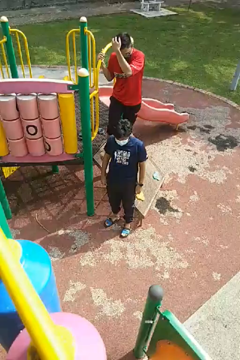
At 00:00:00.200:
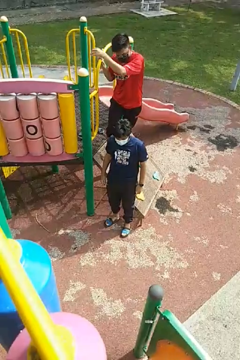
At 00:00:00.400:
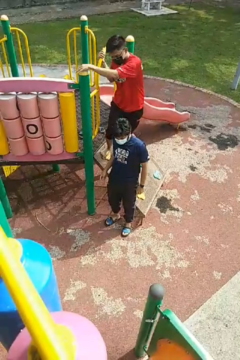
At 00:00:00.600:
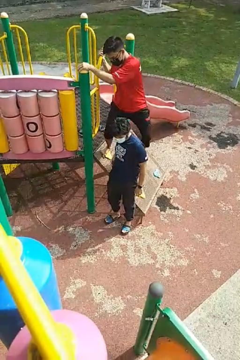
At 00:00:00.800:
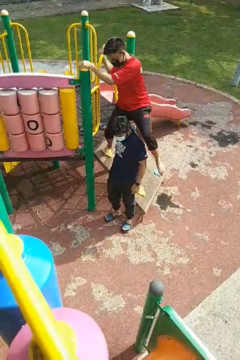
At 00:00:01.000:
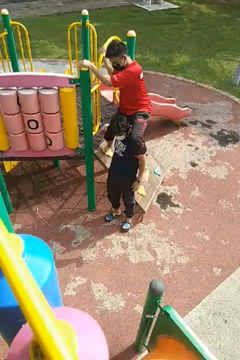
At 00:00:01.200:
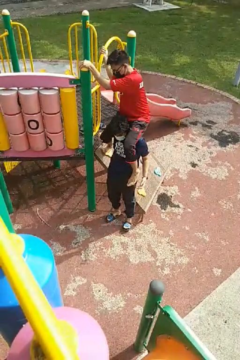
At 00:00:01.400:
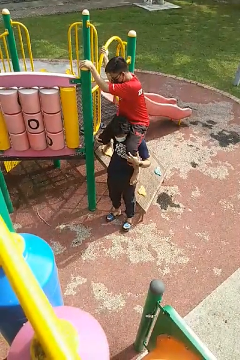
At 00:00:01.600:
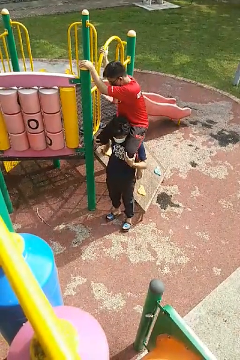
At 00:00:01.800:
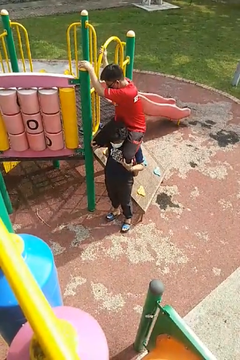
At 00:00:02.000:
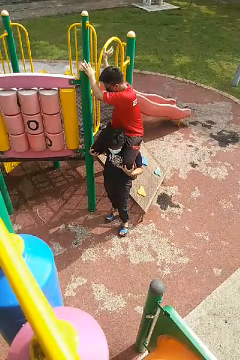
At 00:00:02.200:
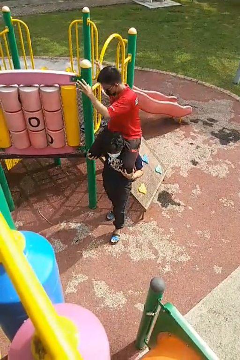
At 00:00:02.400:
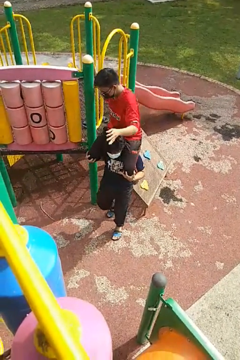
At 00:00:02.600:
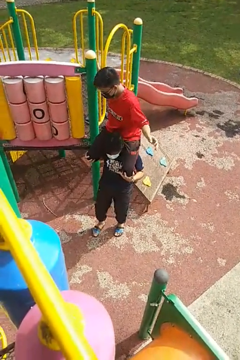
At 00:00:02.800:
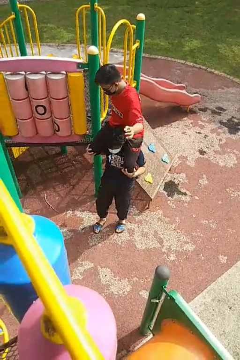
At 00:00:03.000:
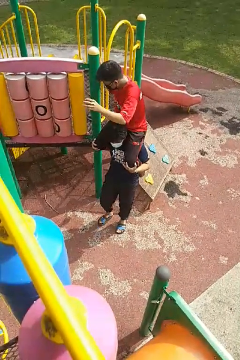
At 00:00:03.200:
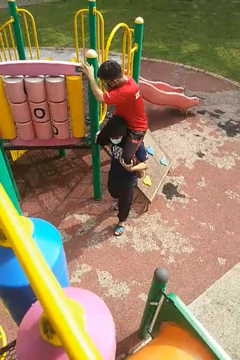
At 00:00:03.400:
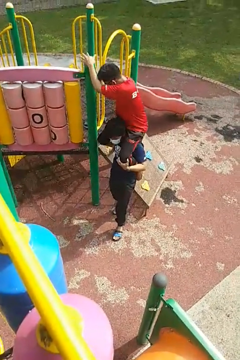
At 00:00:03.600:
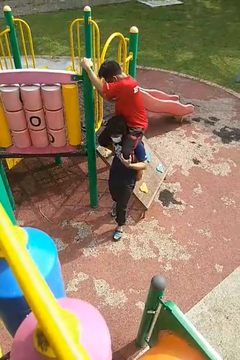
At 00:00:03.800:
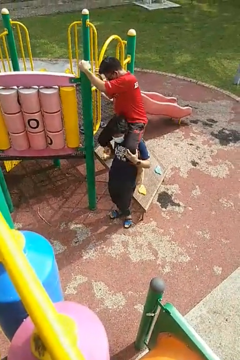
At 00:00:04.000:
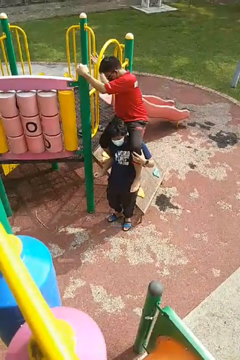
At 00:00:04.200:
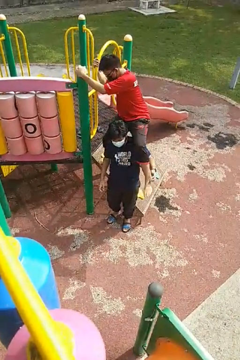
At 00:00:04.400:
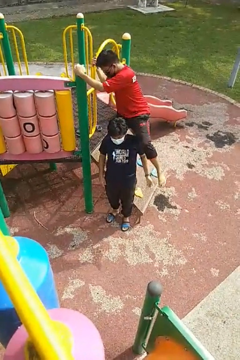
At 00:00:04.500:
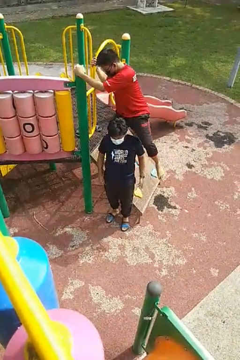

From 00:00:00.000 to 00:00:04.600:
person carries person on shoulders

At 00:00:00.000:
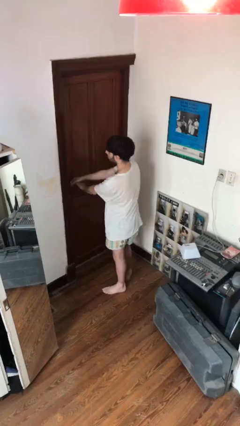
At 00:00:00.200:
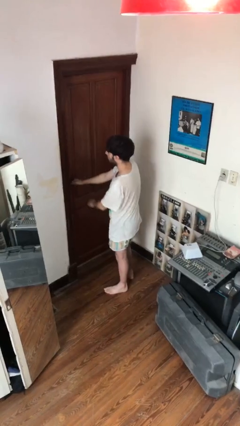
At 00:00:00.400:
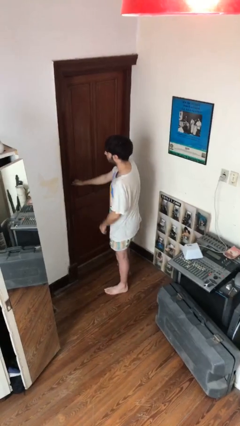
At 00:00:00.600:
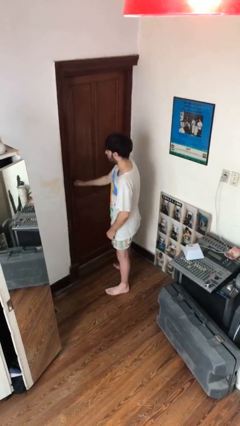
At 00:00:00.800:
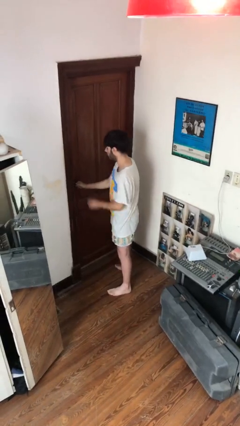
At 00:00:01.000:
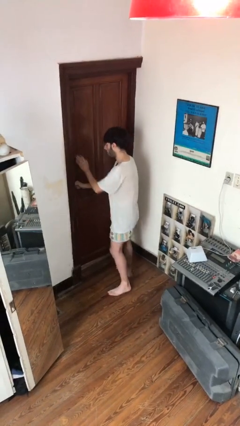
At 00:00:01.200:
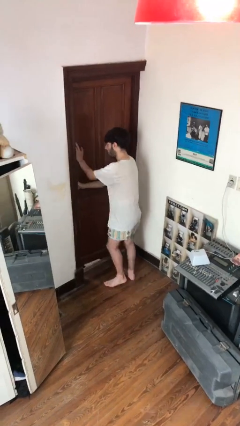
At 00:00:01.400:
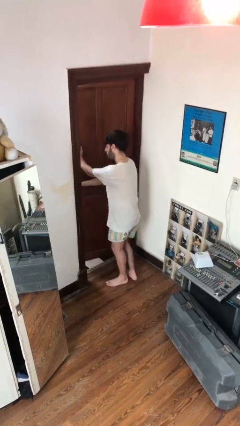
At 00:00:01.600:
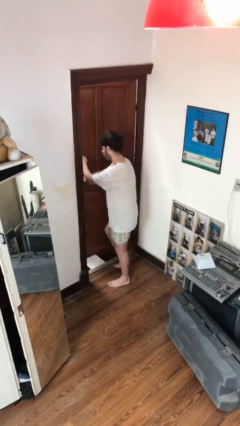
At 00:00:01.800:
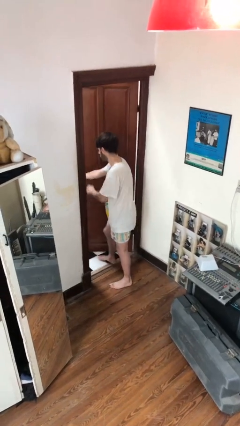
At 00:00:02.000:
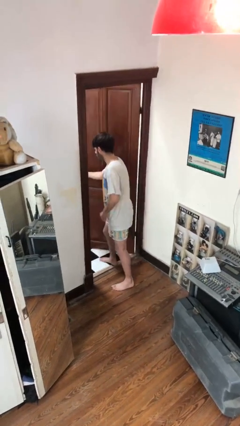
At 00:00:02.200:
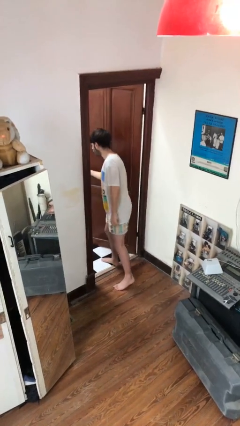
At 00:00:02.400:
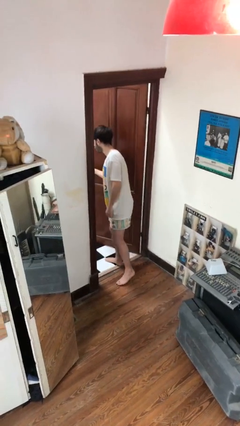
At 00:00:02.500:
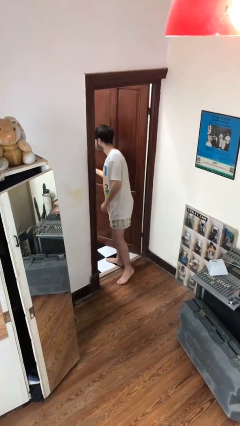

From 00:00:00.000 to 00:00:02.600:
person opens facility door

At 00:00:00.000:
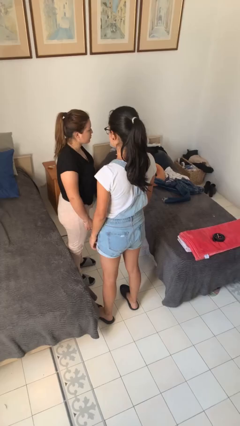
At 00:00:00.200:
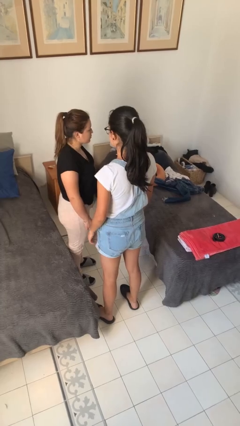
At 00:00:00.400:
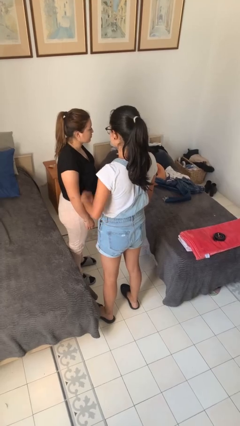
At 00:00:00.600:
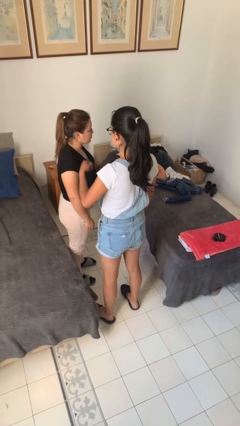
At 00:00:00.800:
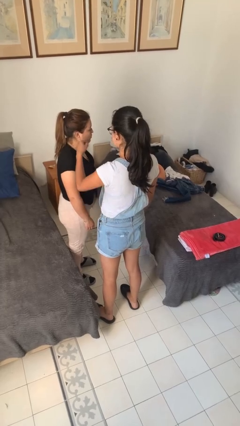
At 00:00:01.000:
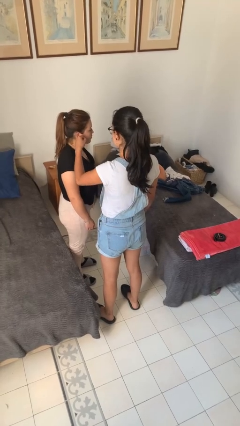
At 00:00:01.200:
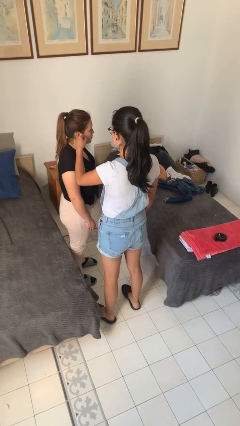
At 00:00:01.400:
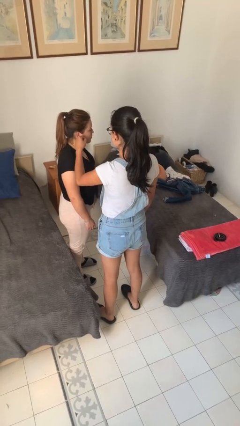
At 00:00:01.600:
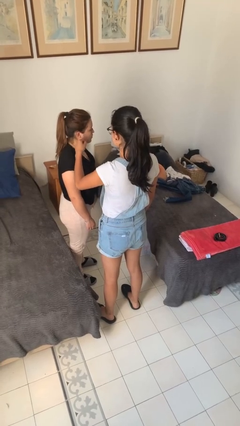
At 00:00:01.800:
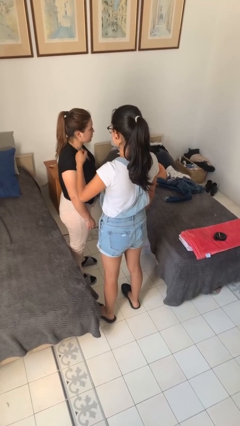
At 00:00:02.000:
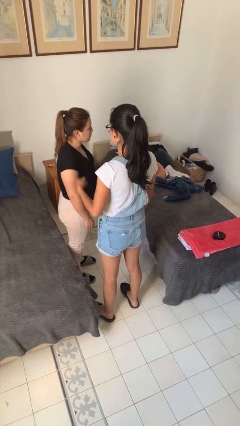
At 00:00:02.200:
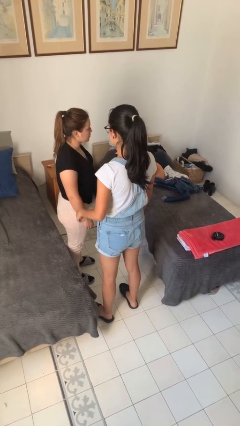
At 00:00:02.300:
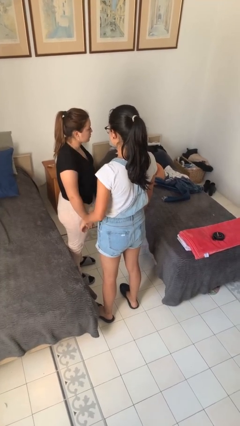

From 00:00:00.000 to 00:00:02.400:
person touches face of person

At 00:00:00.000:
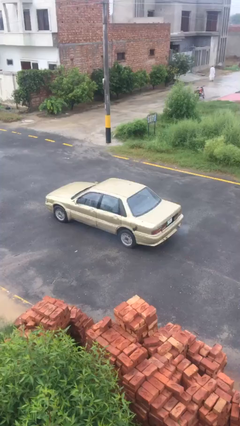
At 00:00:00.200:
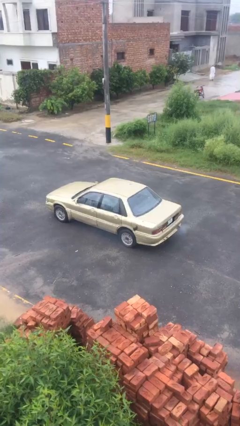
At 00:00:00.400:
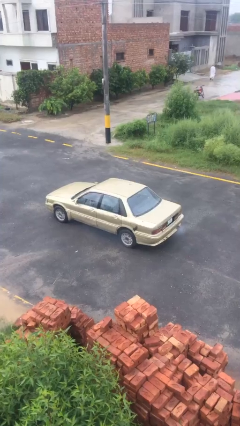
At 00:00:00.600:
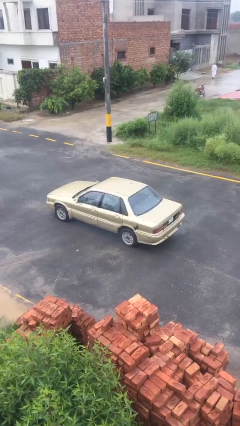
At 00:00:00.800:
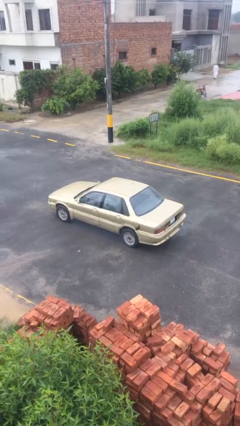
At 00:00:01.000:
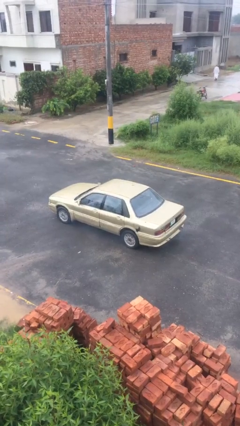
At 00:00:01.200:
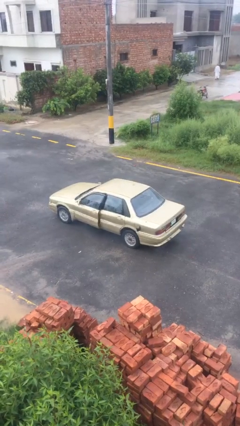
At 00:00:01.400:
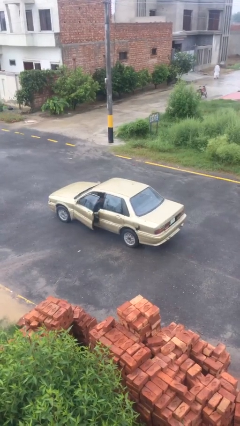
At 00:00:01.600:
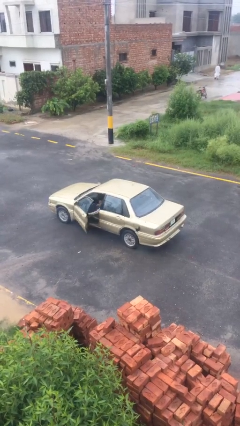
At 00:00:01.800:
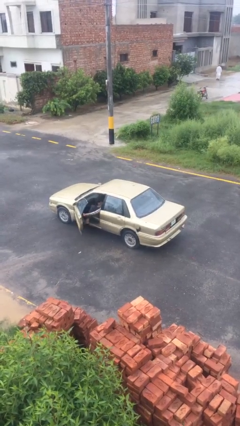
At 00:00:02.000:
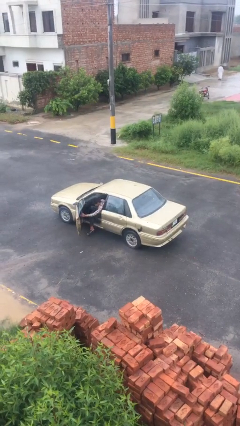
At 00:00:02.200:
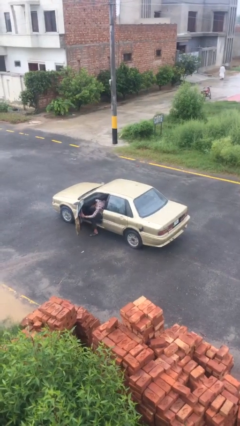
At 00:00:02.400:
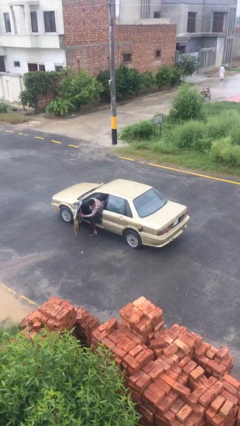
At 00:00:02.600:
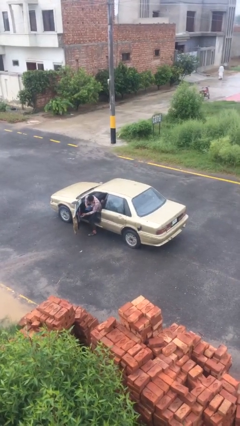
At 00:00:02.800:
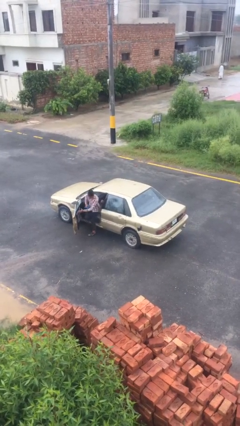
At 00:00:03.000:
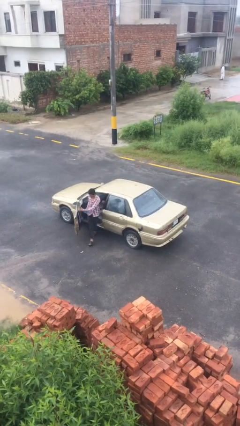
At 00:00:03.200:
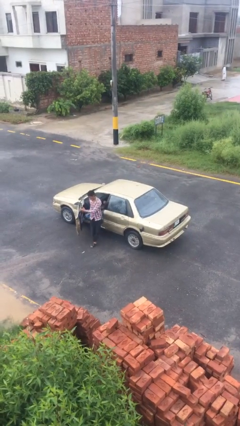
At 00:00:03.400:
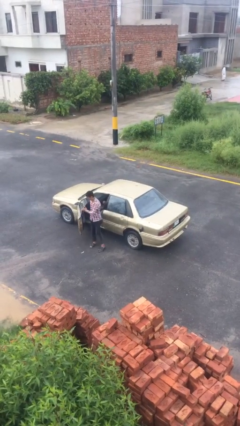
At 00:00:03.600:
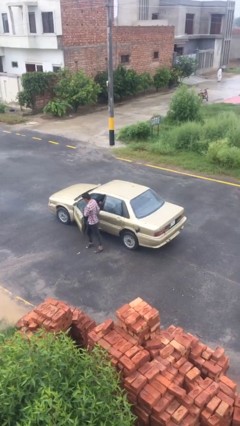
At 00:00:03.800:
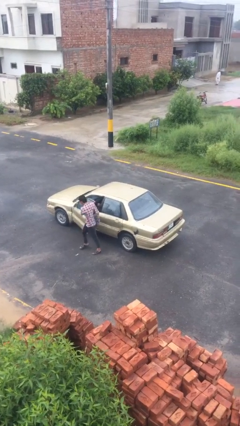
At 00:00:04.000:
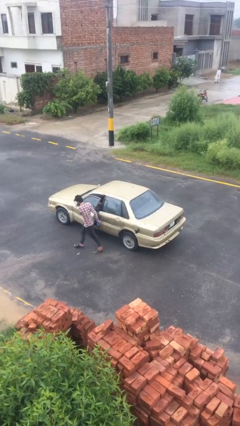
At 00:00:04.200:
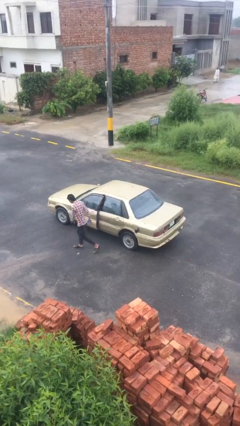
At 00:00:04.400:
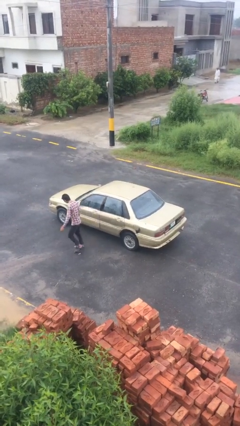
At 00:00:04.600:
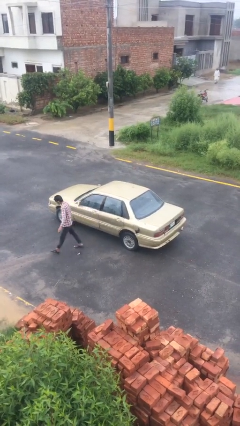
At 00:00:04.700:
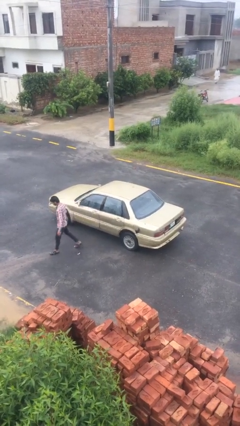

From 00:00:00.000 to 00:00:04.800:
car drops off person

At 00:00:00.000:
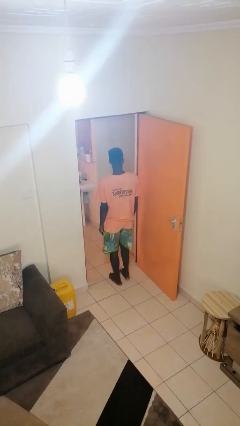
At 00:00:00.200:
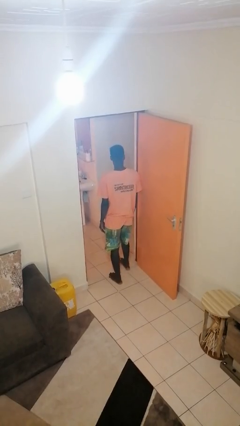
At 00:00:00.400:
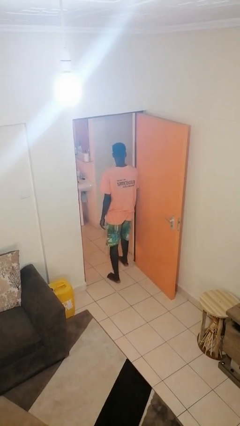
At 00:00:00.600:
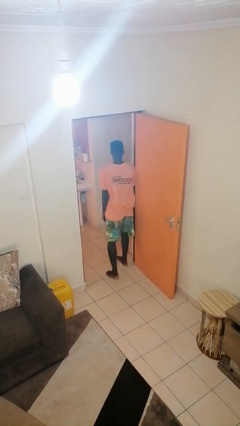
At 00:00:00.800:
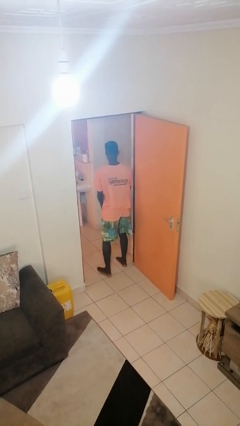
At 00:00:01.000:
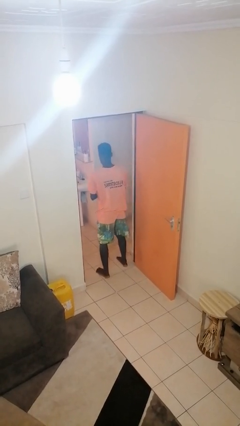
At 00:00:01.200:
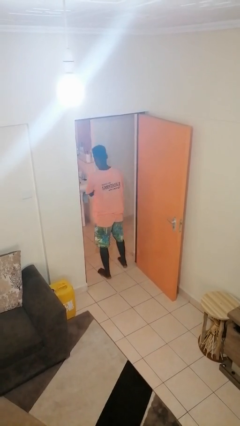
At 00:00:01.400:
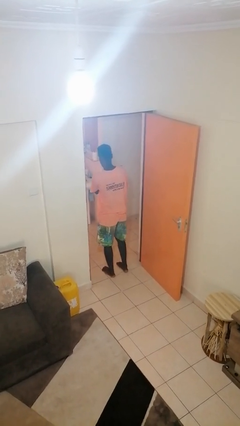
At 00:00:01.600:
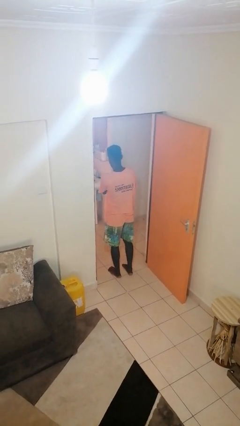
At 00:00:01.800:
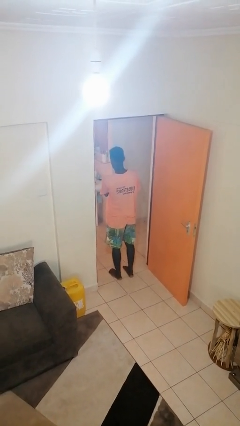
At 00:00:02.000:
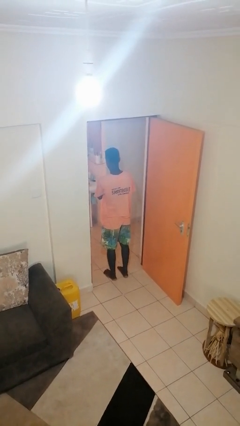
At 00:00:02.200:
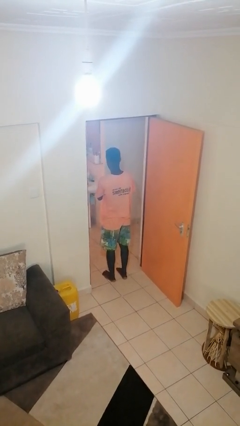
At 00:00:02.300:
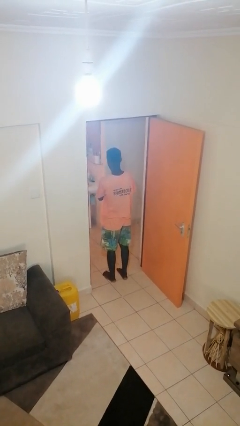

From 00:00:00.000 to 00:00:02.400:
person bumps into wall

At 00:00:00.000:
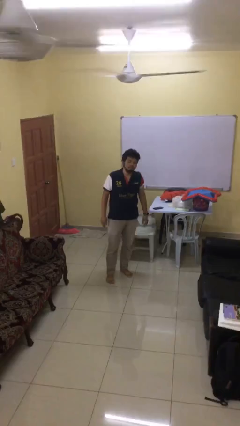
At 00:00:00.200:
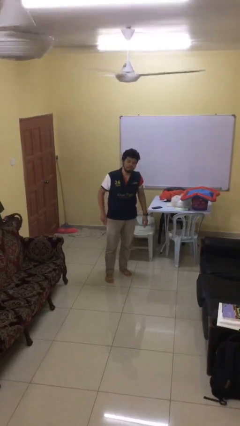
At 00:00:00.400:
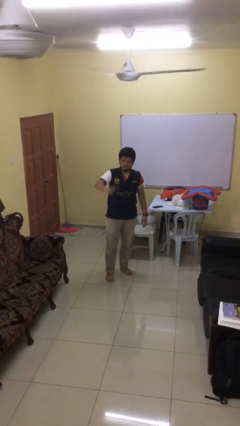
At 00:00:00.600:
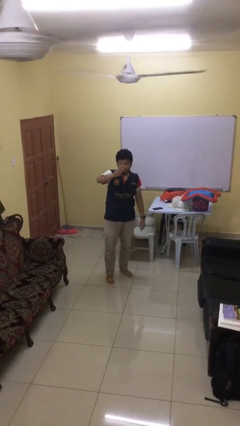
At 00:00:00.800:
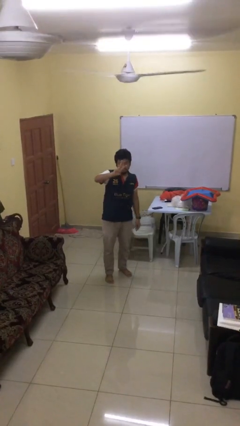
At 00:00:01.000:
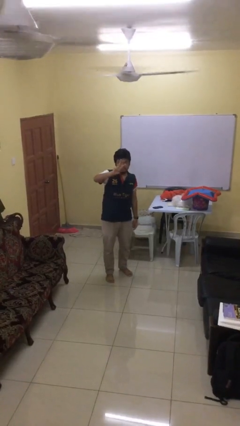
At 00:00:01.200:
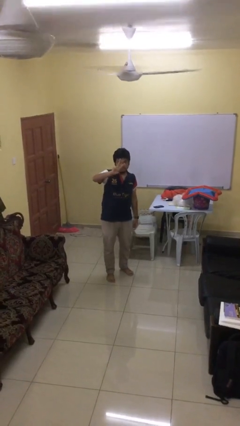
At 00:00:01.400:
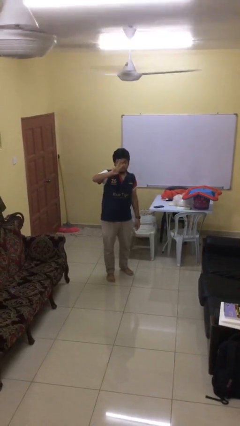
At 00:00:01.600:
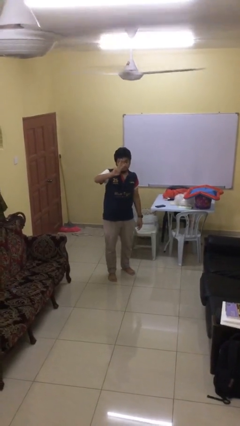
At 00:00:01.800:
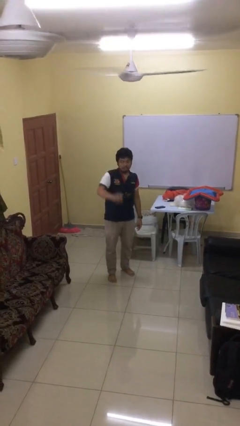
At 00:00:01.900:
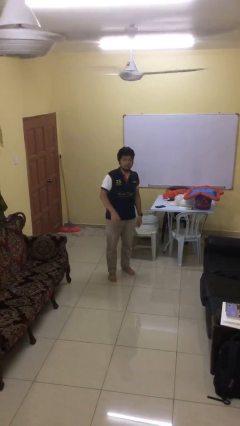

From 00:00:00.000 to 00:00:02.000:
person gestures peace
